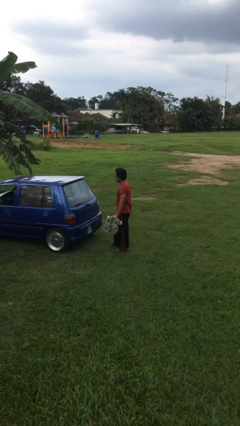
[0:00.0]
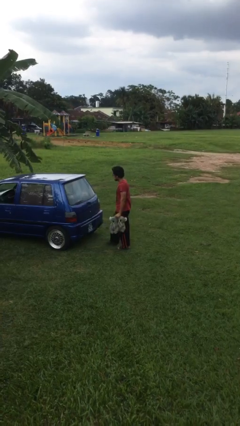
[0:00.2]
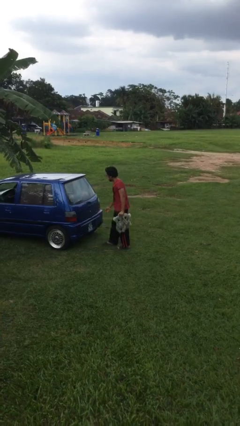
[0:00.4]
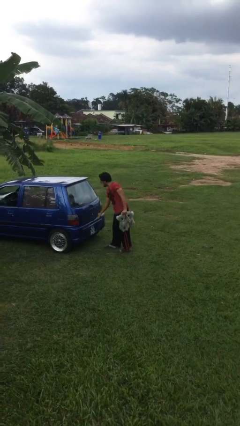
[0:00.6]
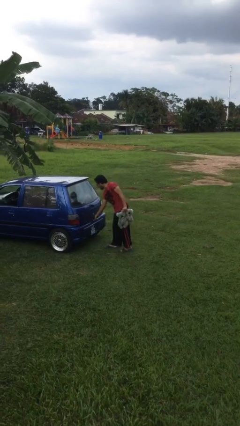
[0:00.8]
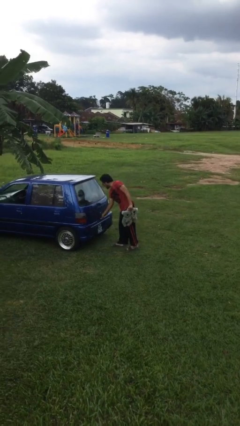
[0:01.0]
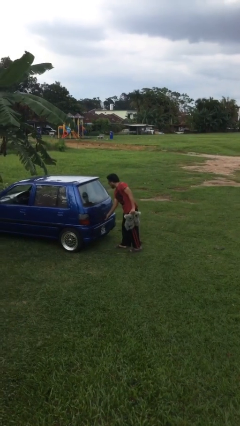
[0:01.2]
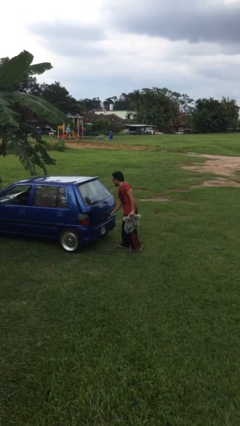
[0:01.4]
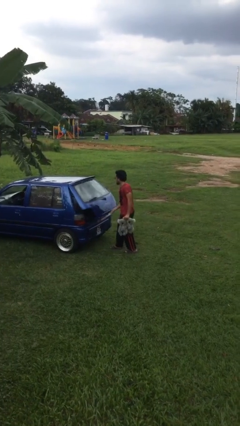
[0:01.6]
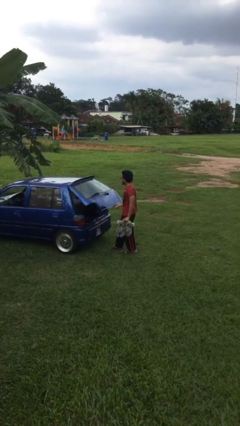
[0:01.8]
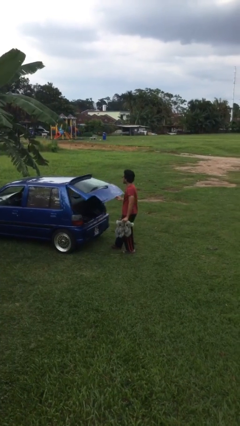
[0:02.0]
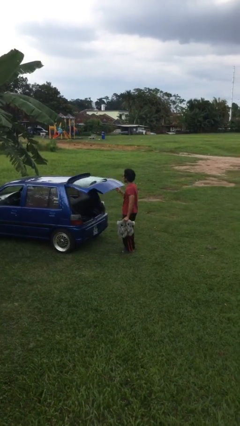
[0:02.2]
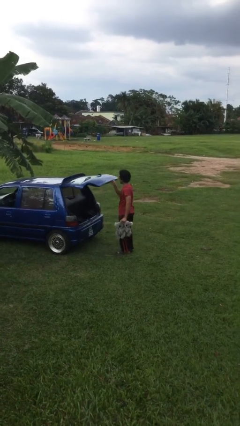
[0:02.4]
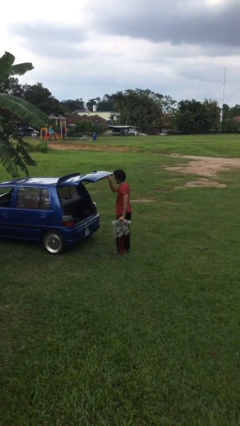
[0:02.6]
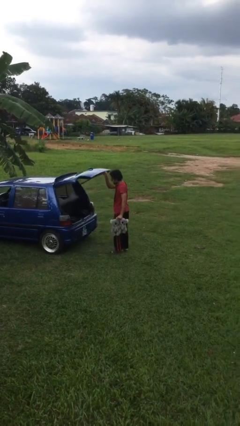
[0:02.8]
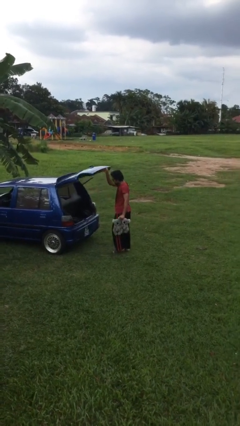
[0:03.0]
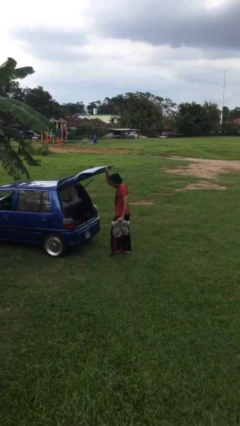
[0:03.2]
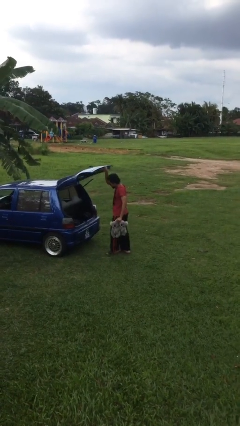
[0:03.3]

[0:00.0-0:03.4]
person opens car trunk

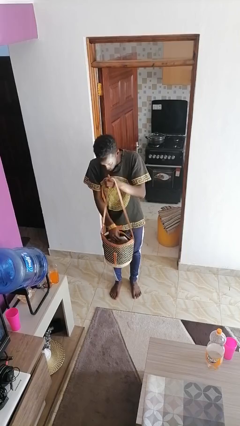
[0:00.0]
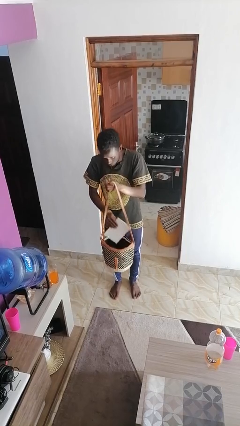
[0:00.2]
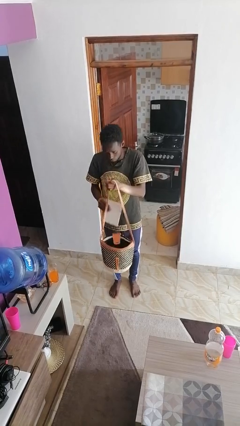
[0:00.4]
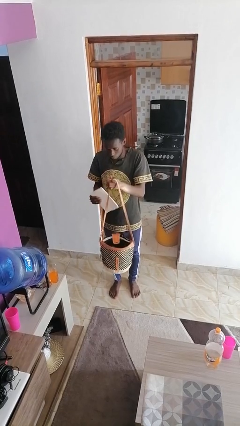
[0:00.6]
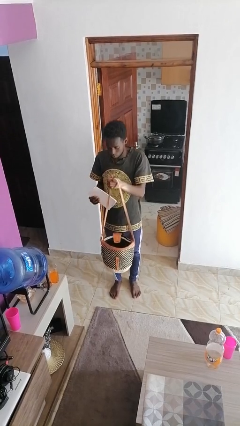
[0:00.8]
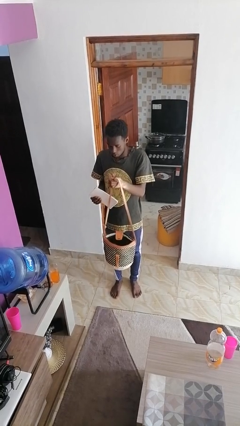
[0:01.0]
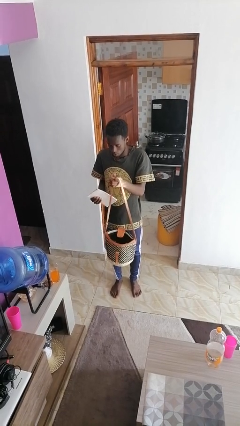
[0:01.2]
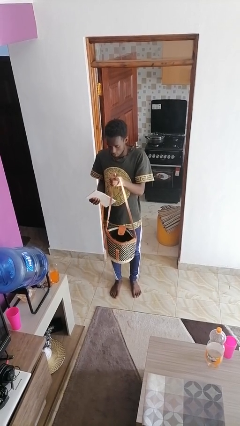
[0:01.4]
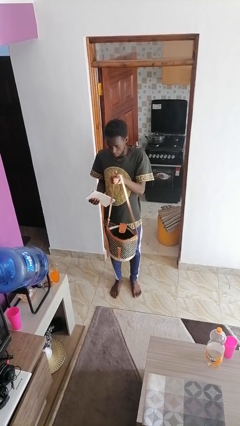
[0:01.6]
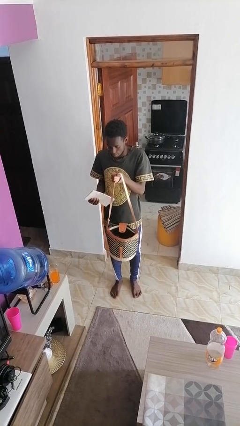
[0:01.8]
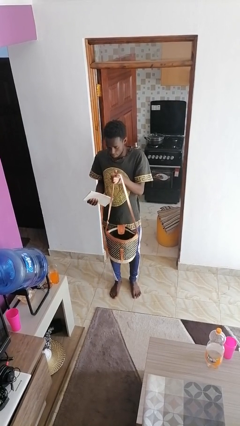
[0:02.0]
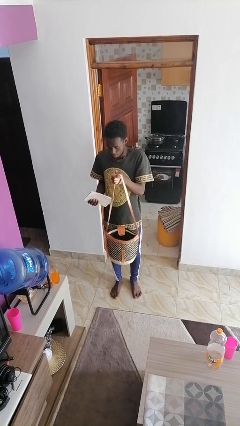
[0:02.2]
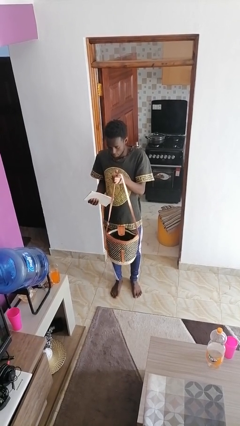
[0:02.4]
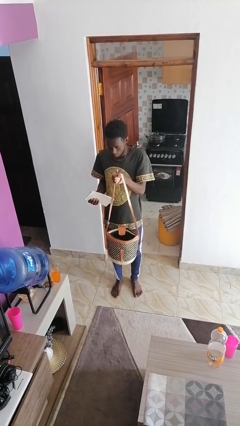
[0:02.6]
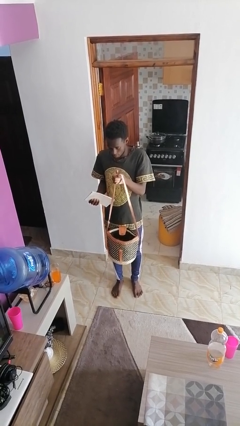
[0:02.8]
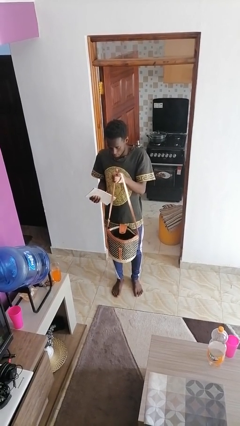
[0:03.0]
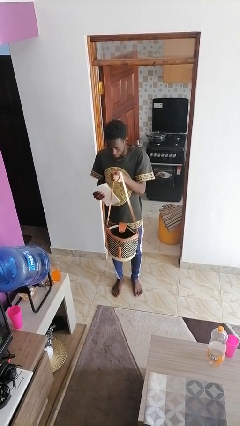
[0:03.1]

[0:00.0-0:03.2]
person takes object from purse

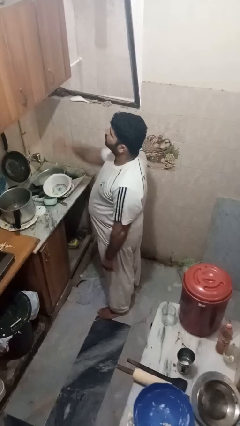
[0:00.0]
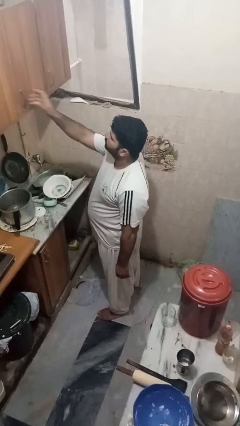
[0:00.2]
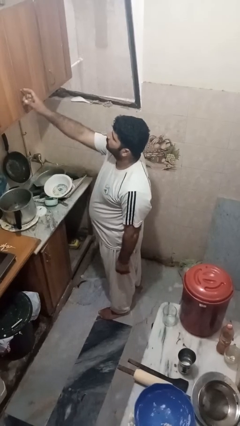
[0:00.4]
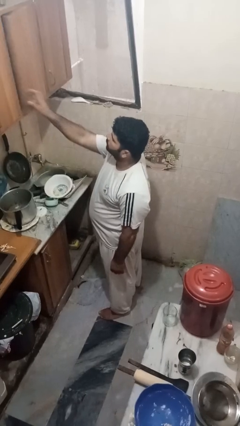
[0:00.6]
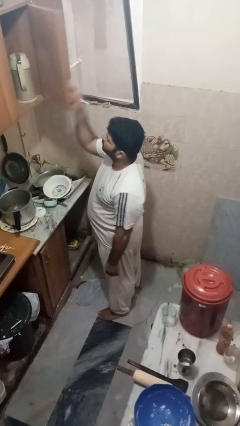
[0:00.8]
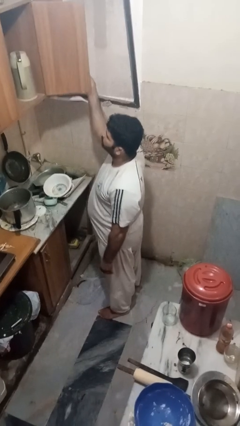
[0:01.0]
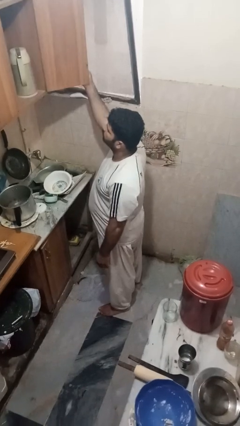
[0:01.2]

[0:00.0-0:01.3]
person opens cabinet

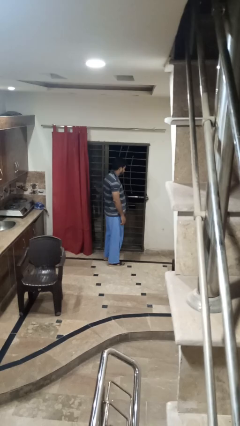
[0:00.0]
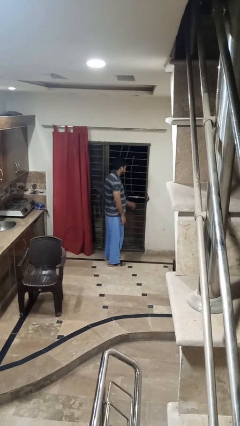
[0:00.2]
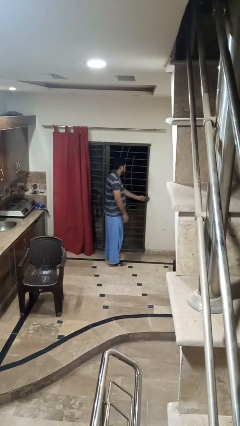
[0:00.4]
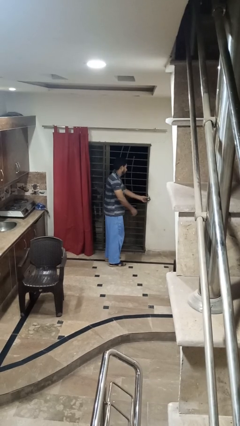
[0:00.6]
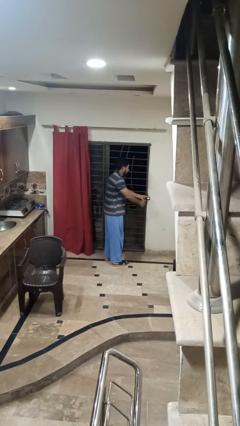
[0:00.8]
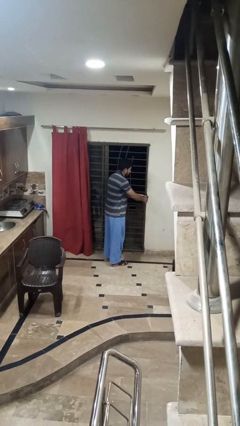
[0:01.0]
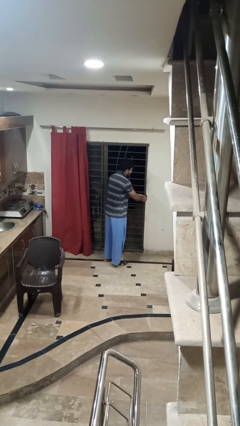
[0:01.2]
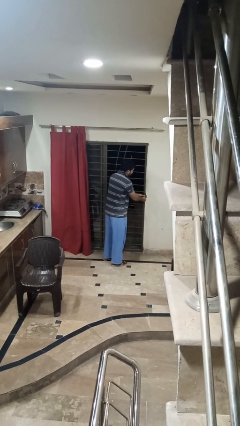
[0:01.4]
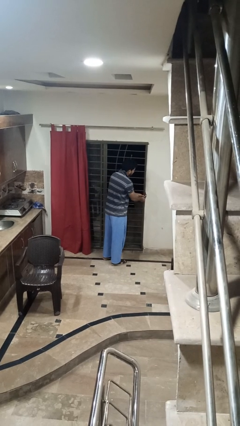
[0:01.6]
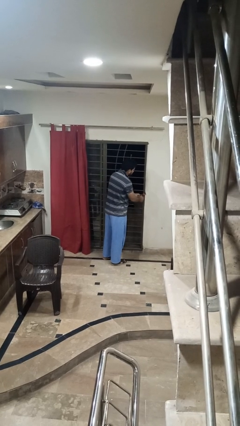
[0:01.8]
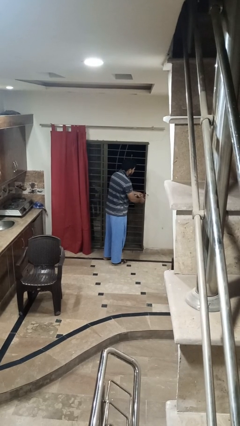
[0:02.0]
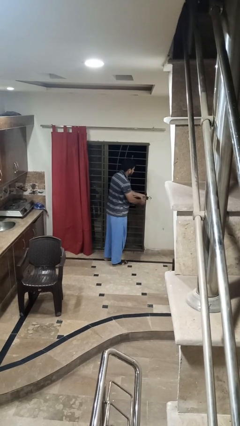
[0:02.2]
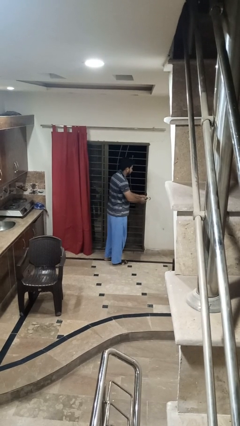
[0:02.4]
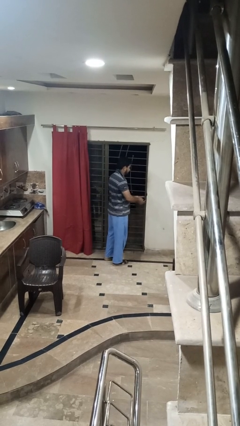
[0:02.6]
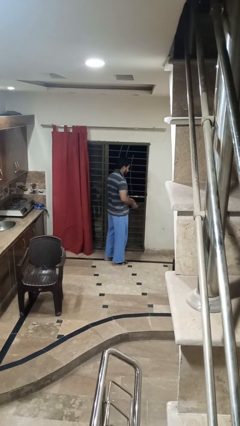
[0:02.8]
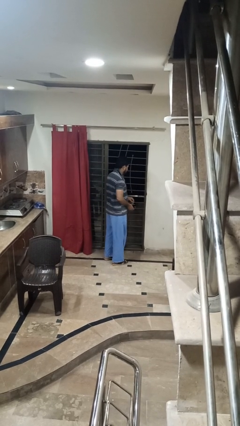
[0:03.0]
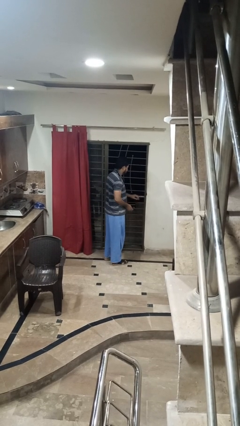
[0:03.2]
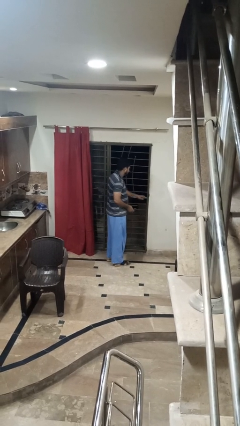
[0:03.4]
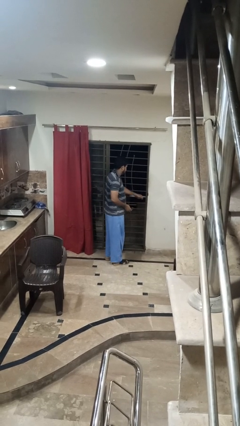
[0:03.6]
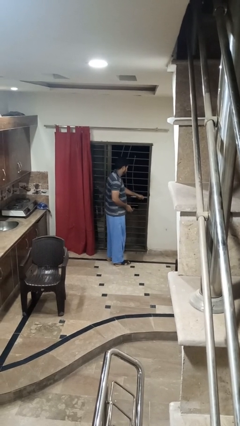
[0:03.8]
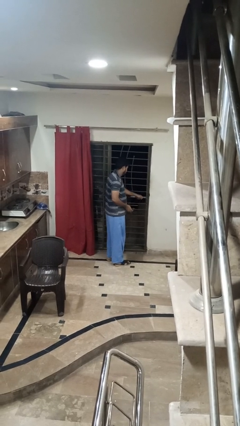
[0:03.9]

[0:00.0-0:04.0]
person unlocks door with keys

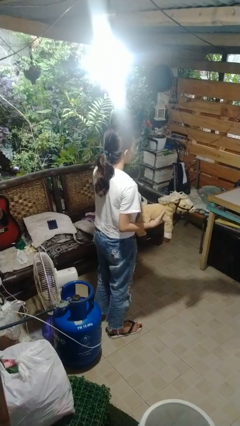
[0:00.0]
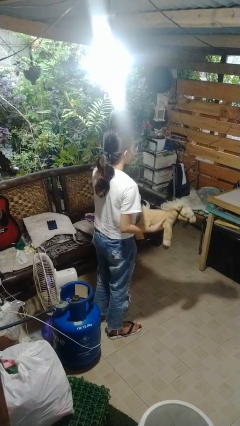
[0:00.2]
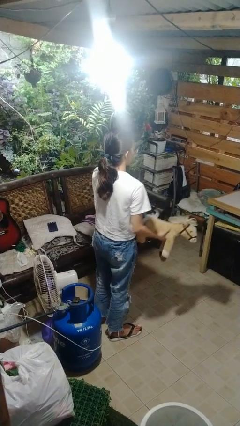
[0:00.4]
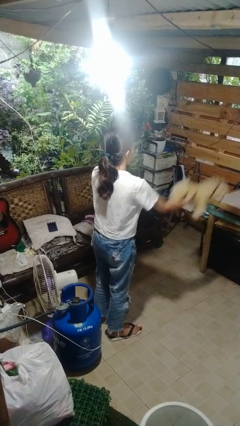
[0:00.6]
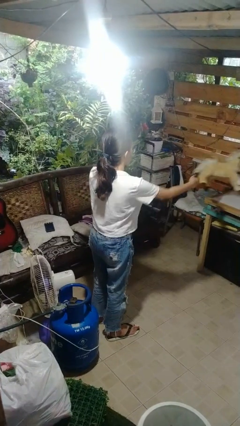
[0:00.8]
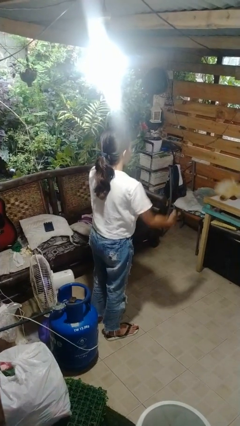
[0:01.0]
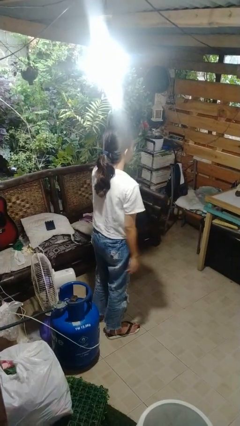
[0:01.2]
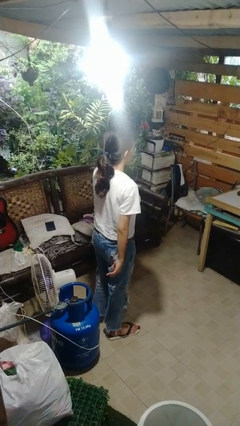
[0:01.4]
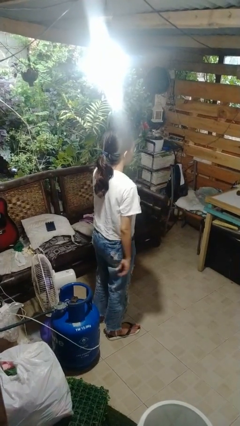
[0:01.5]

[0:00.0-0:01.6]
person throws object on table

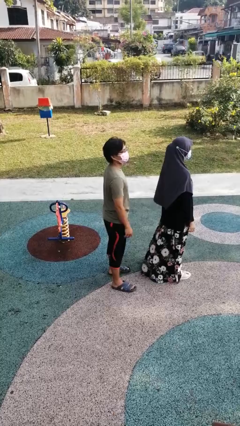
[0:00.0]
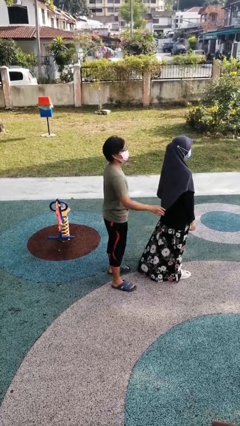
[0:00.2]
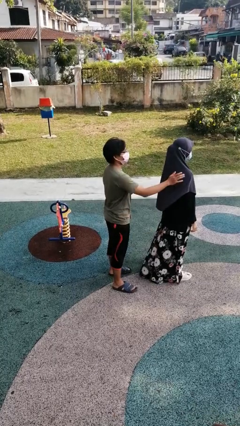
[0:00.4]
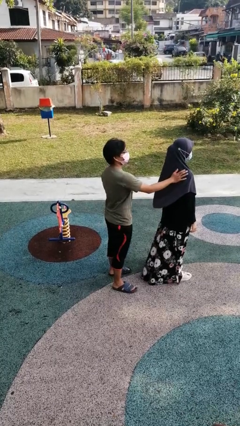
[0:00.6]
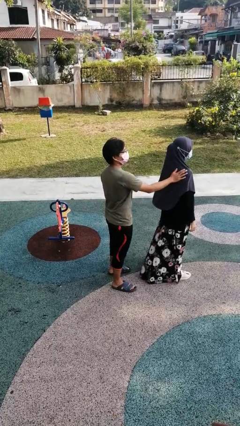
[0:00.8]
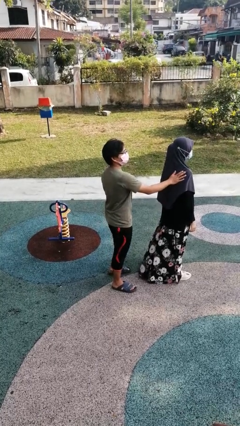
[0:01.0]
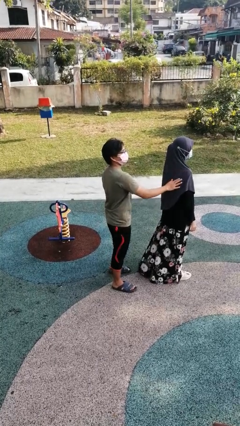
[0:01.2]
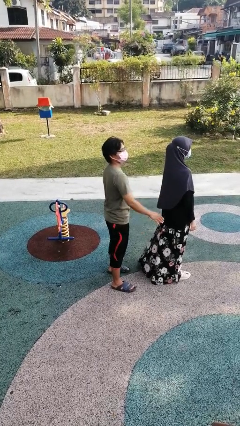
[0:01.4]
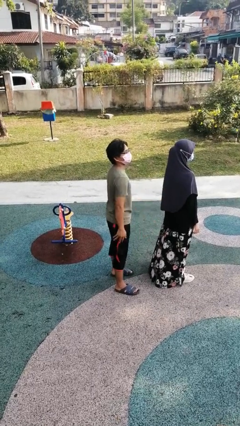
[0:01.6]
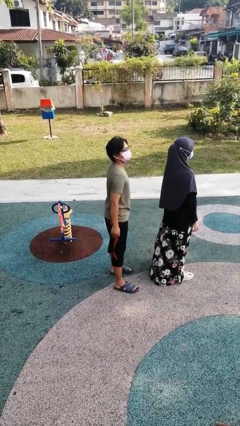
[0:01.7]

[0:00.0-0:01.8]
person touches back of person

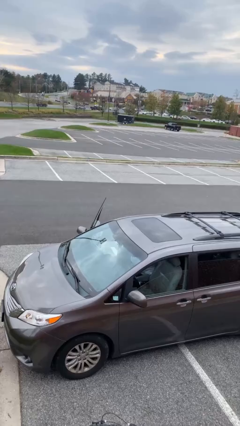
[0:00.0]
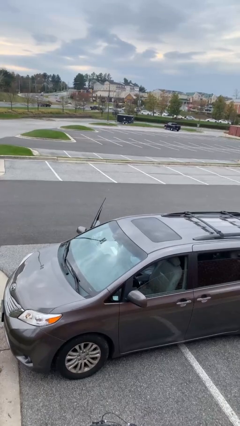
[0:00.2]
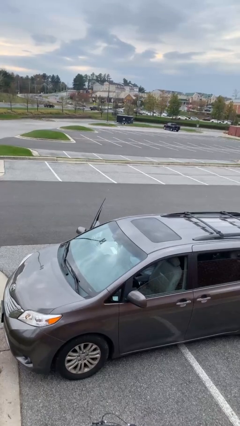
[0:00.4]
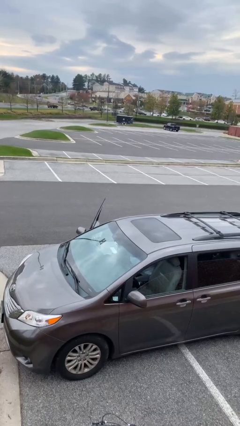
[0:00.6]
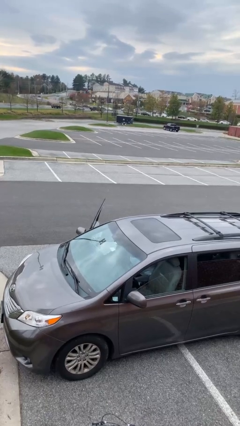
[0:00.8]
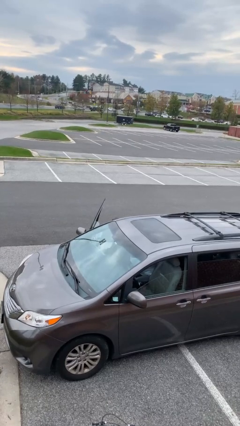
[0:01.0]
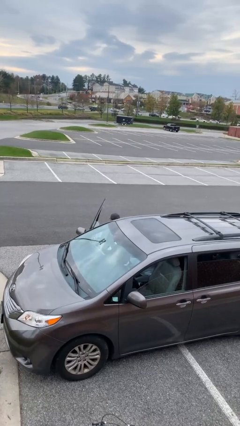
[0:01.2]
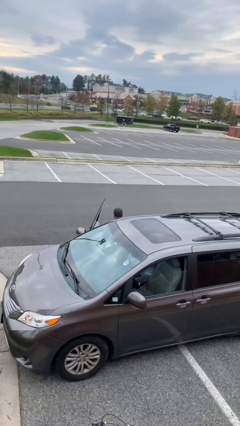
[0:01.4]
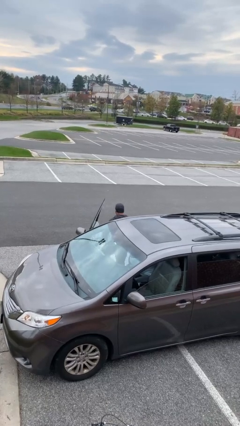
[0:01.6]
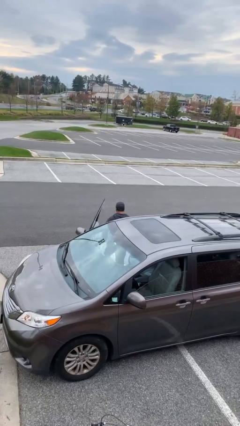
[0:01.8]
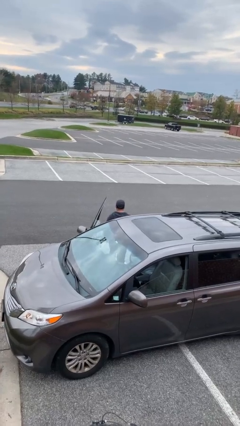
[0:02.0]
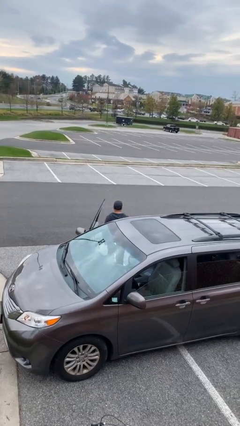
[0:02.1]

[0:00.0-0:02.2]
person exits car
